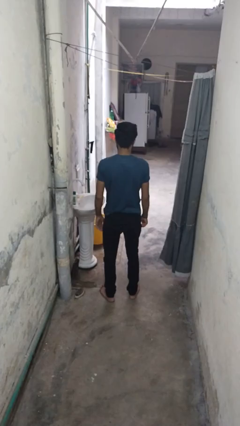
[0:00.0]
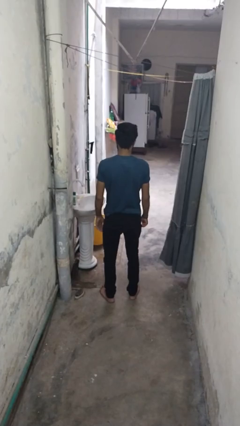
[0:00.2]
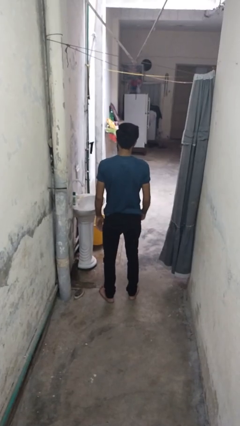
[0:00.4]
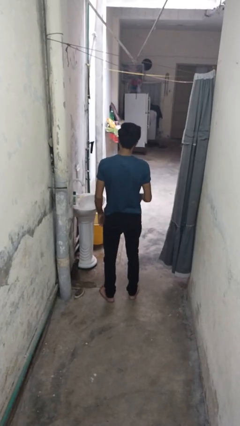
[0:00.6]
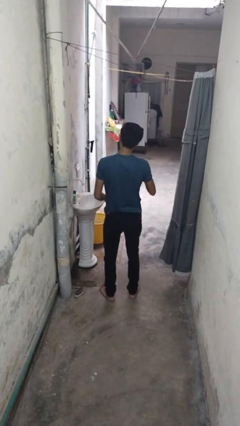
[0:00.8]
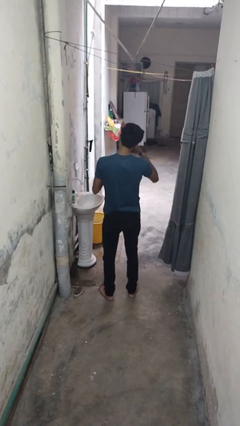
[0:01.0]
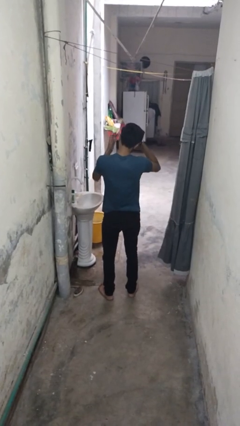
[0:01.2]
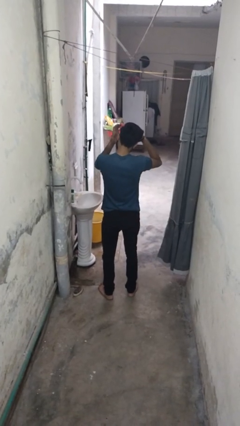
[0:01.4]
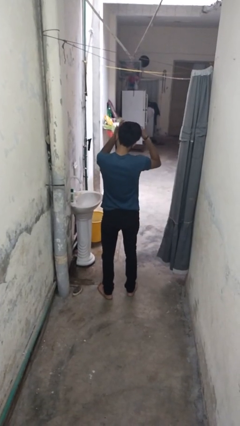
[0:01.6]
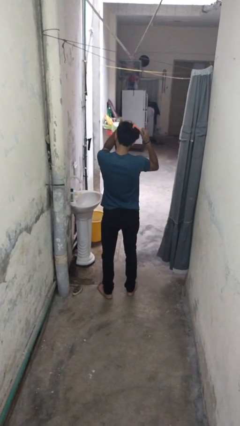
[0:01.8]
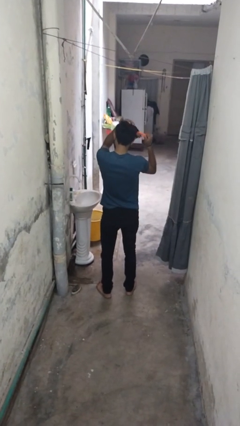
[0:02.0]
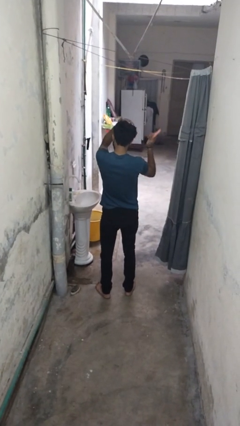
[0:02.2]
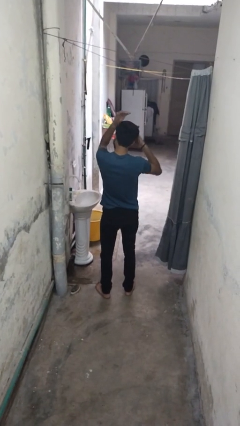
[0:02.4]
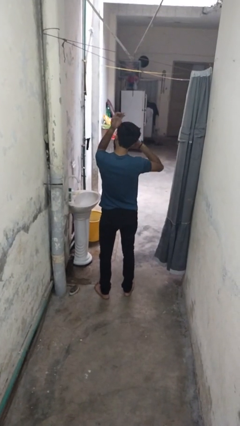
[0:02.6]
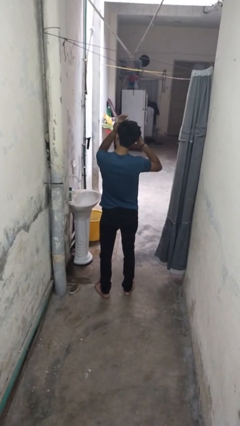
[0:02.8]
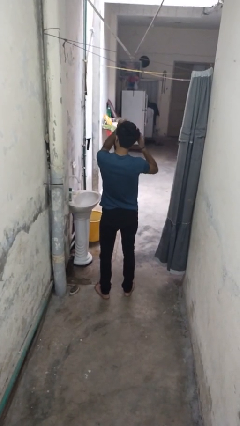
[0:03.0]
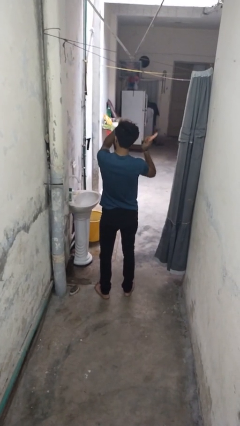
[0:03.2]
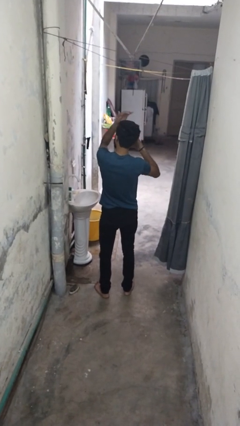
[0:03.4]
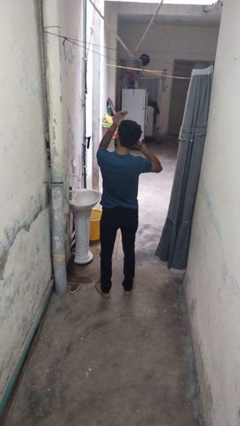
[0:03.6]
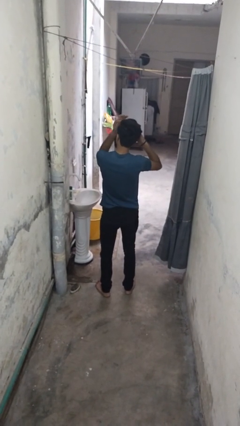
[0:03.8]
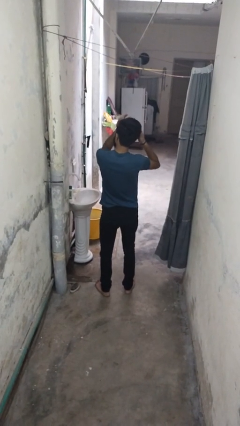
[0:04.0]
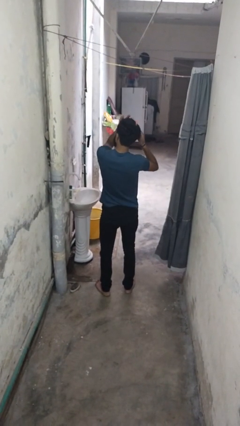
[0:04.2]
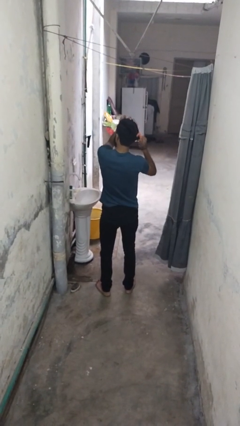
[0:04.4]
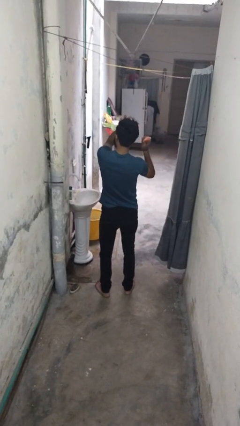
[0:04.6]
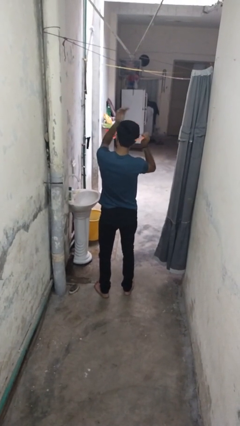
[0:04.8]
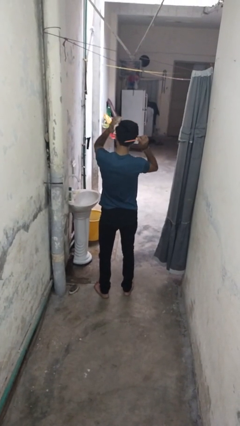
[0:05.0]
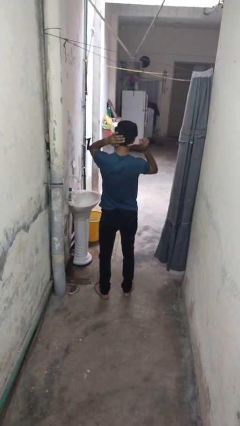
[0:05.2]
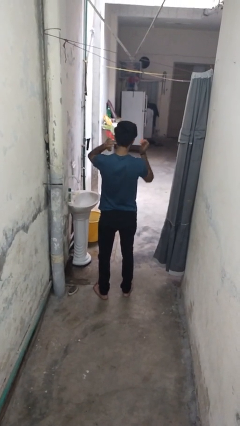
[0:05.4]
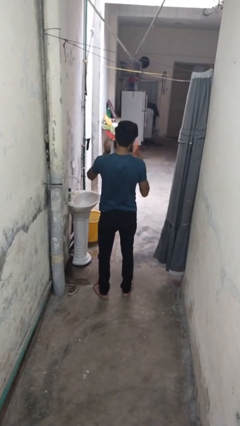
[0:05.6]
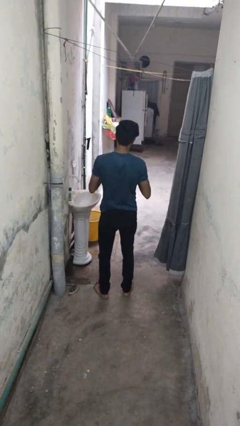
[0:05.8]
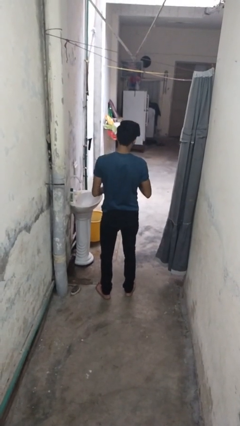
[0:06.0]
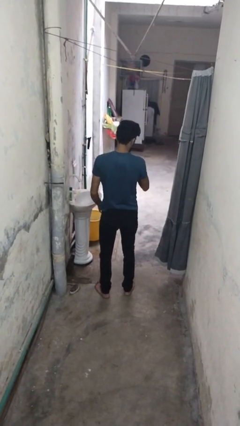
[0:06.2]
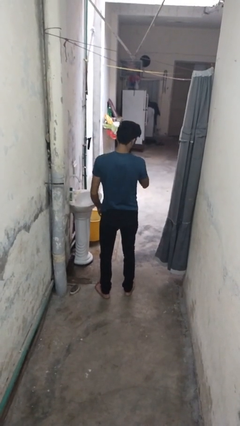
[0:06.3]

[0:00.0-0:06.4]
person brushes hair

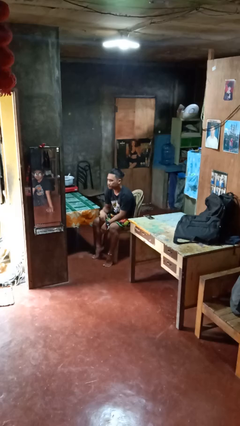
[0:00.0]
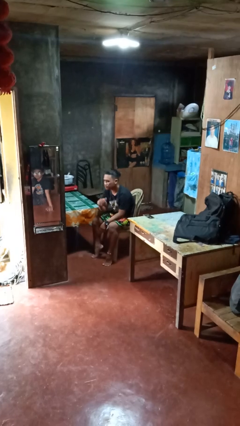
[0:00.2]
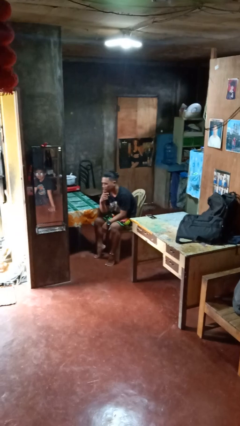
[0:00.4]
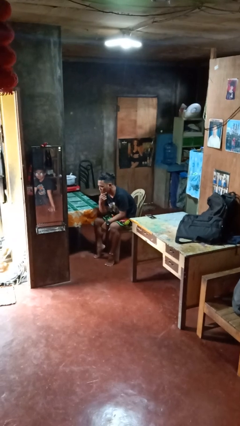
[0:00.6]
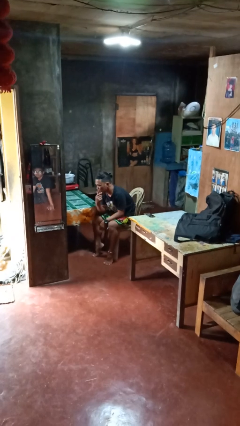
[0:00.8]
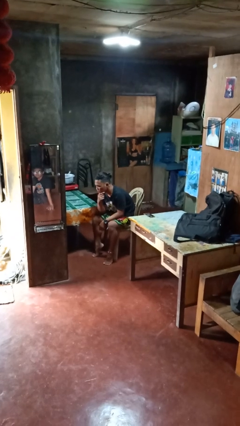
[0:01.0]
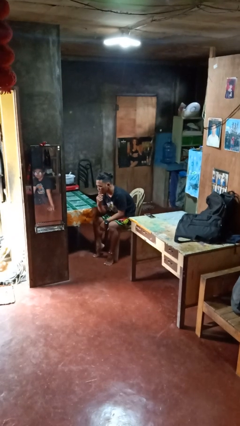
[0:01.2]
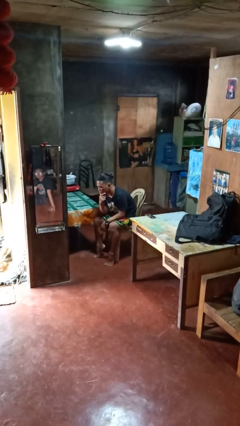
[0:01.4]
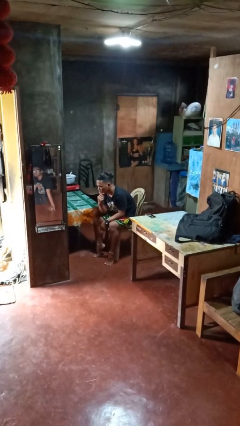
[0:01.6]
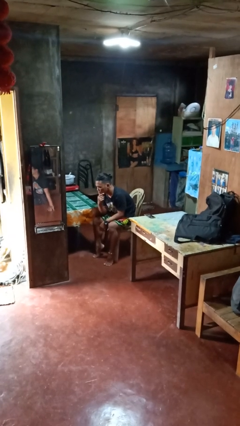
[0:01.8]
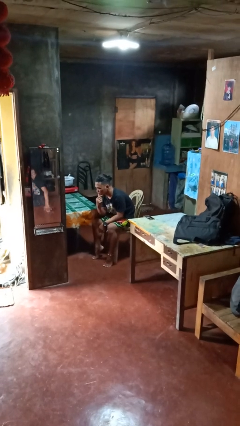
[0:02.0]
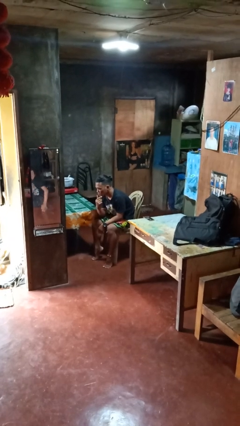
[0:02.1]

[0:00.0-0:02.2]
person strokes chin

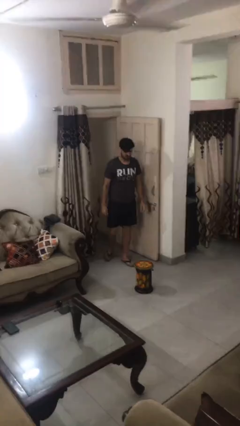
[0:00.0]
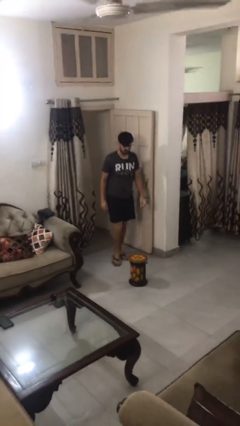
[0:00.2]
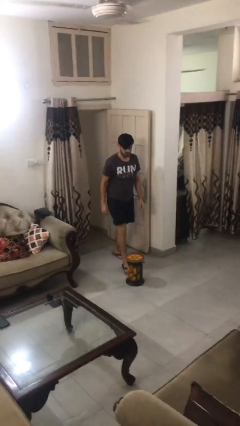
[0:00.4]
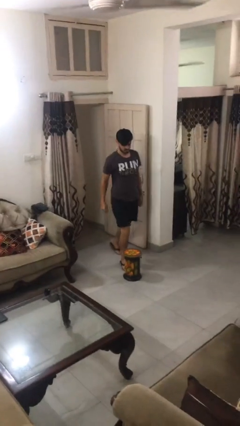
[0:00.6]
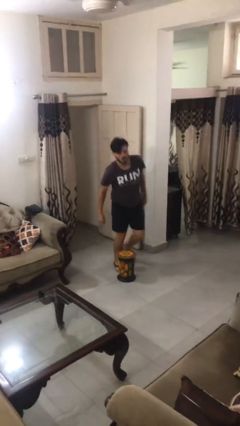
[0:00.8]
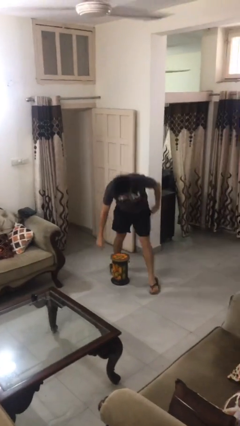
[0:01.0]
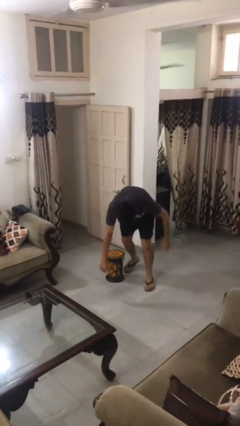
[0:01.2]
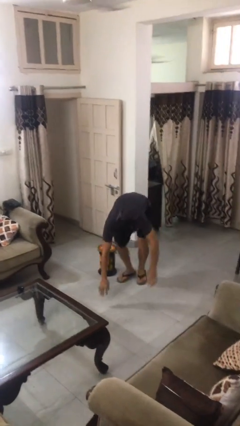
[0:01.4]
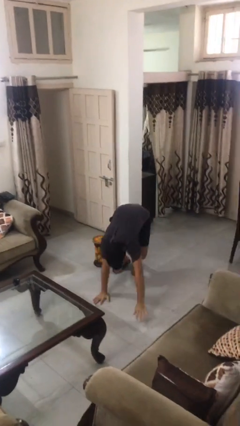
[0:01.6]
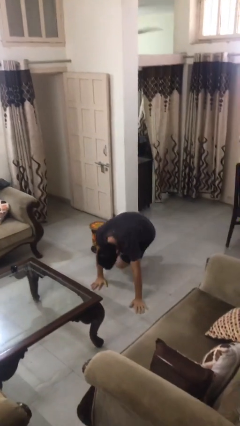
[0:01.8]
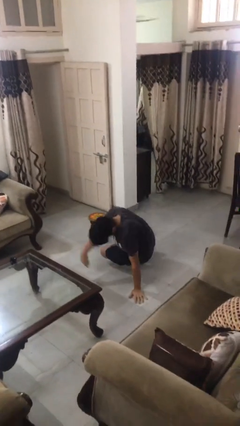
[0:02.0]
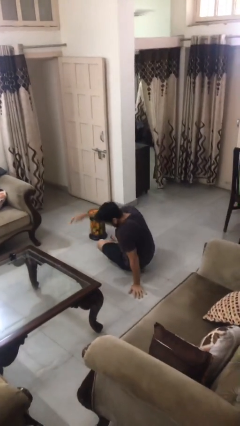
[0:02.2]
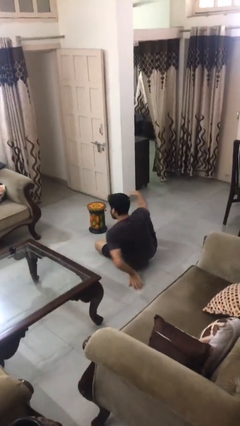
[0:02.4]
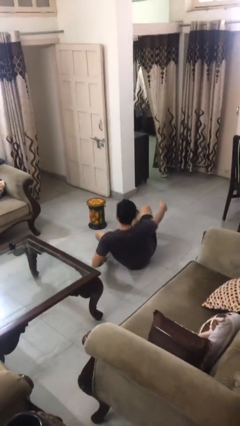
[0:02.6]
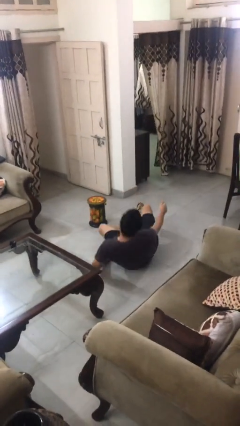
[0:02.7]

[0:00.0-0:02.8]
person trips on object on floor

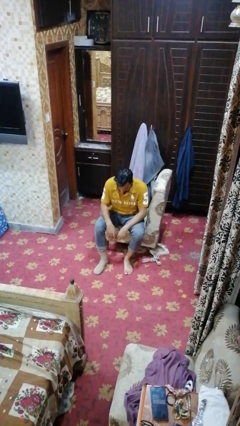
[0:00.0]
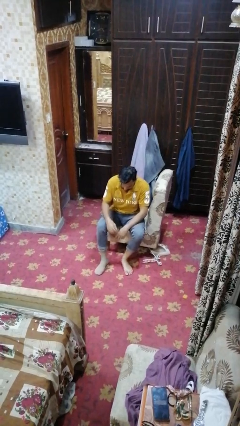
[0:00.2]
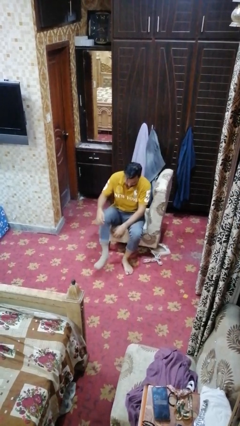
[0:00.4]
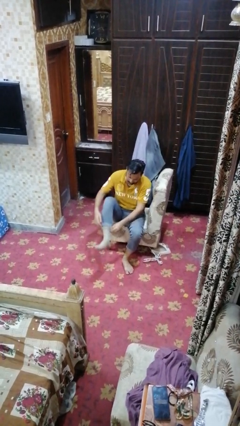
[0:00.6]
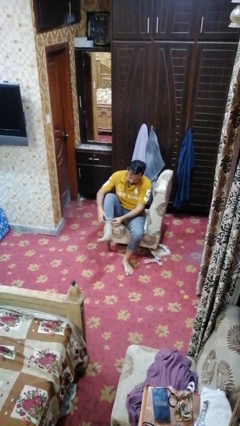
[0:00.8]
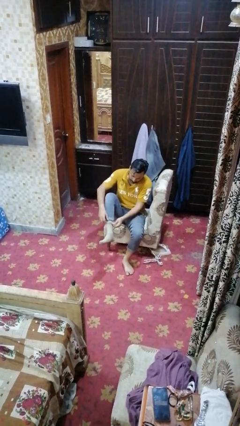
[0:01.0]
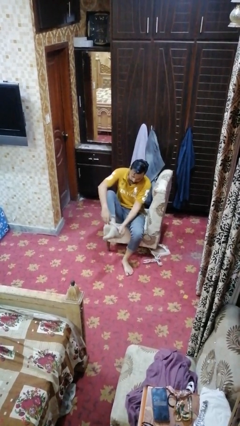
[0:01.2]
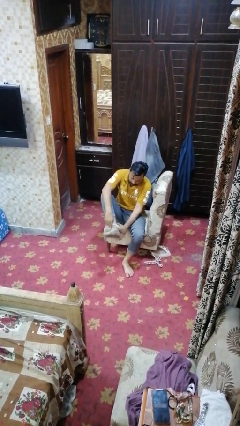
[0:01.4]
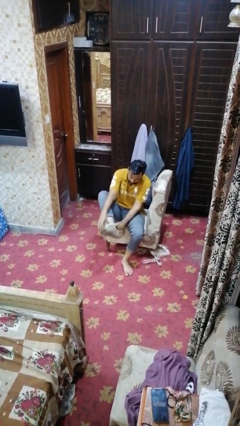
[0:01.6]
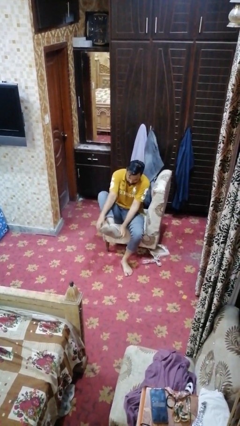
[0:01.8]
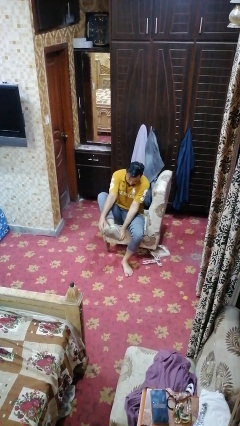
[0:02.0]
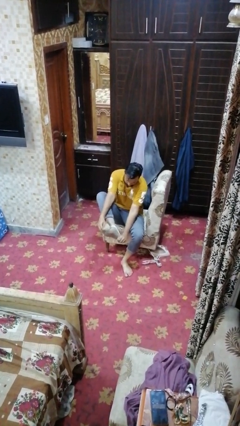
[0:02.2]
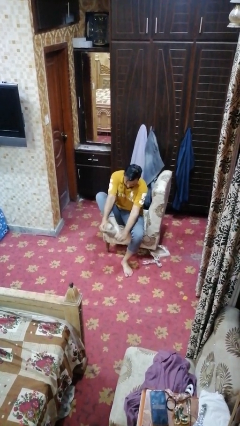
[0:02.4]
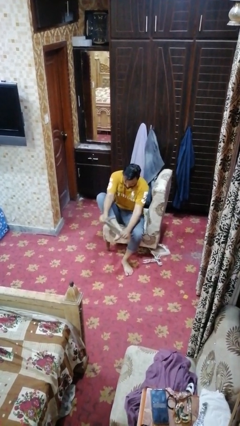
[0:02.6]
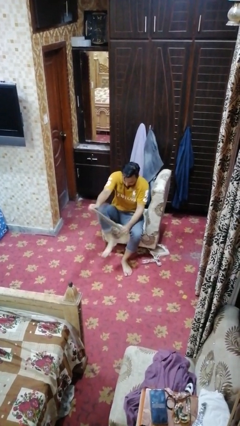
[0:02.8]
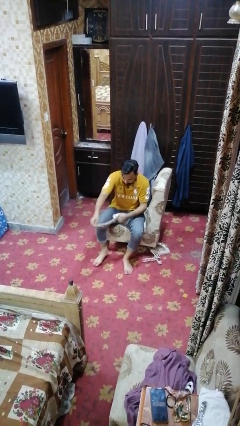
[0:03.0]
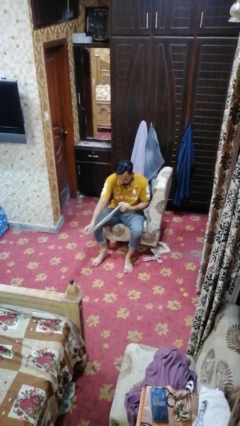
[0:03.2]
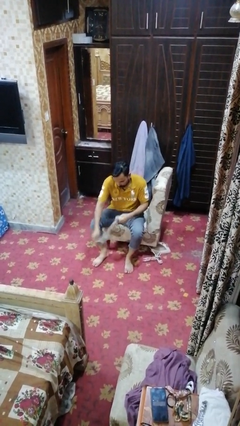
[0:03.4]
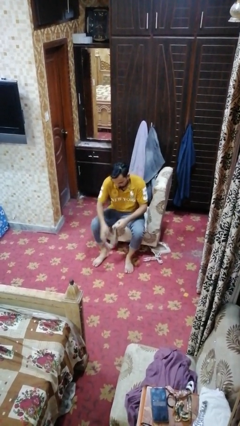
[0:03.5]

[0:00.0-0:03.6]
person takes off socks

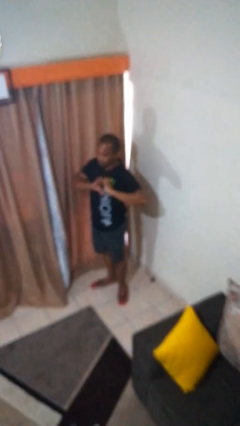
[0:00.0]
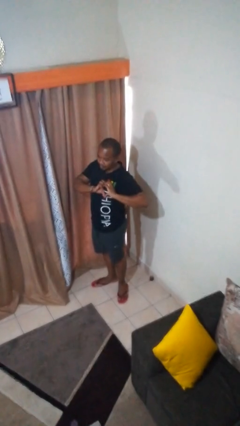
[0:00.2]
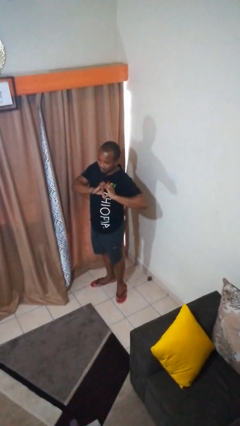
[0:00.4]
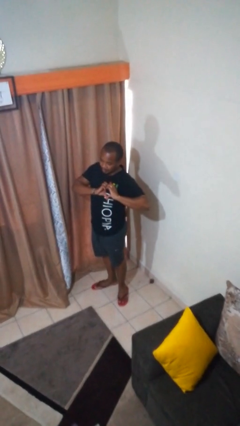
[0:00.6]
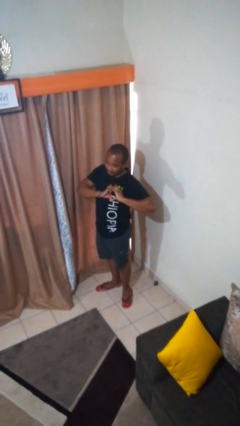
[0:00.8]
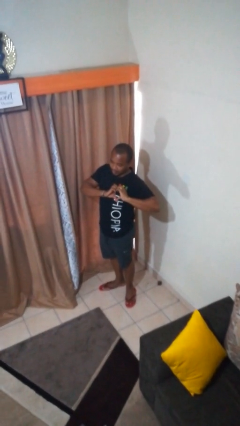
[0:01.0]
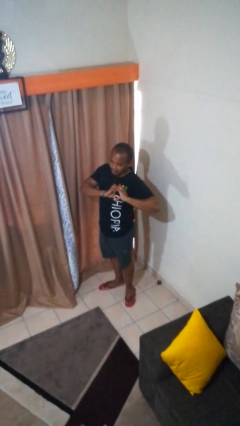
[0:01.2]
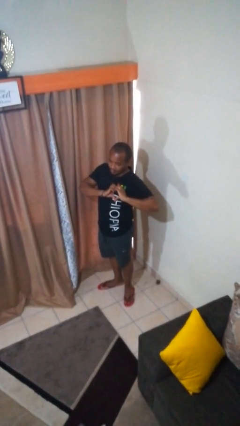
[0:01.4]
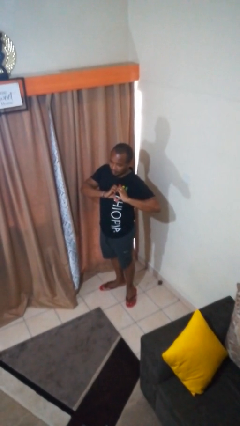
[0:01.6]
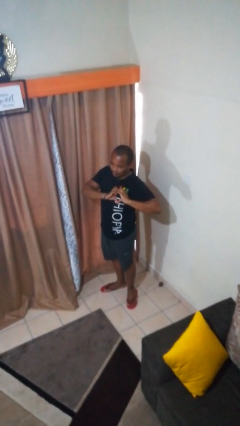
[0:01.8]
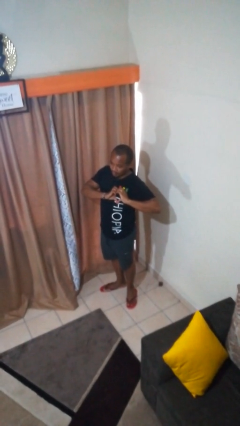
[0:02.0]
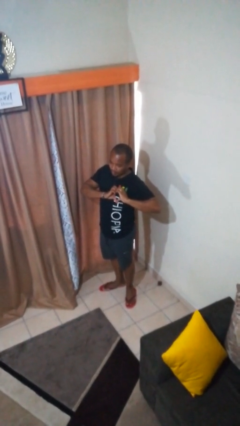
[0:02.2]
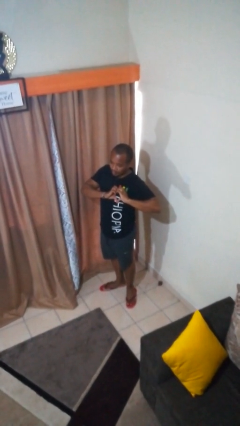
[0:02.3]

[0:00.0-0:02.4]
person gestures heart
